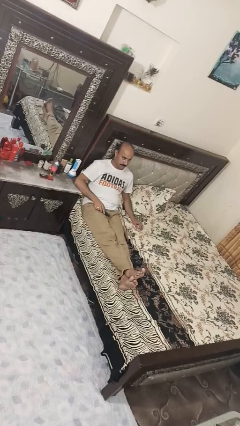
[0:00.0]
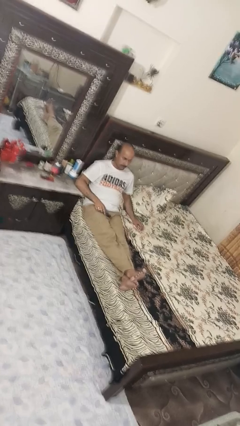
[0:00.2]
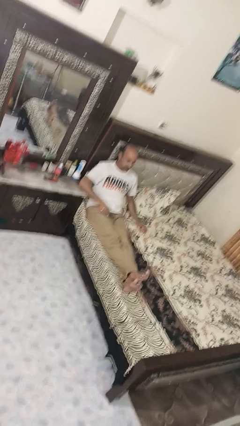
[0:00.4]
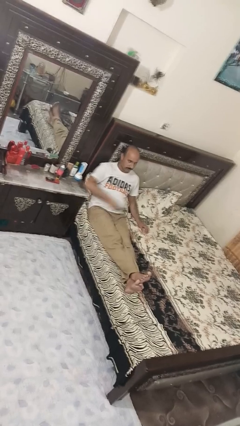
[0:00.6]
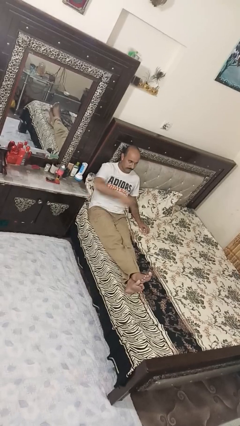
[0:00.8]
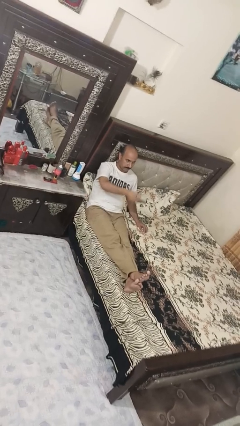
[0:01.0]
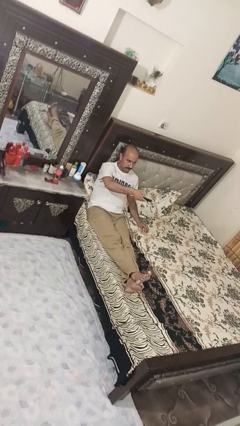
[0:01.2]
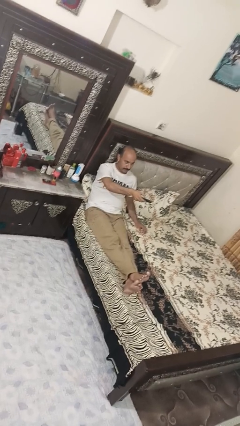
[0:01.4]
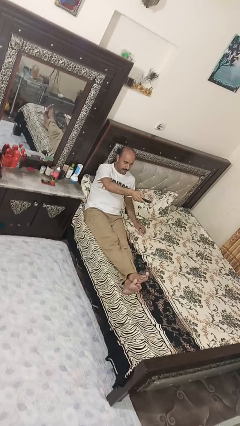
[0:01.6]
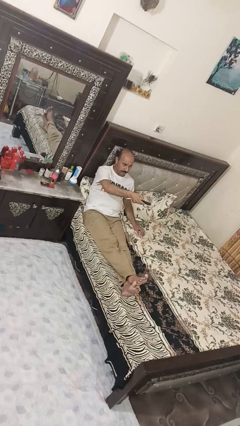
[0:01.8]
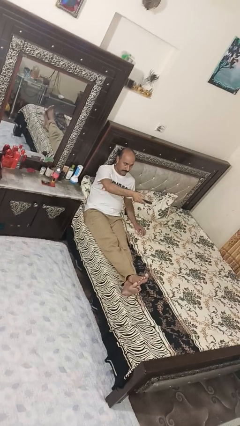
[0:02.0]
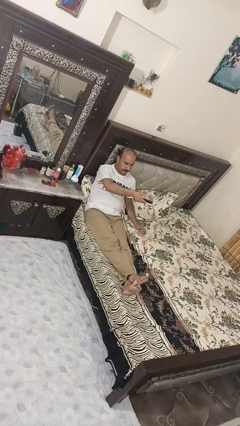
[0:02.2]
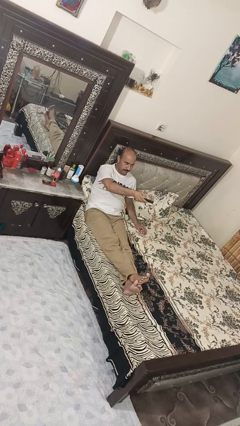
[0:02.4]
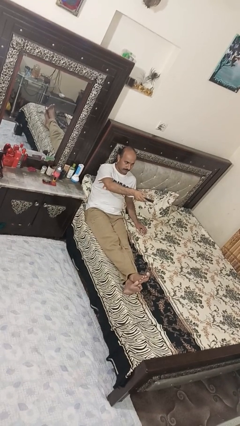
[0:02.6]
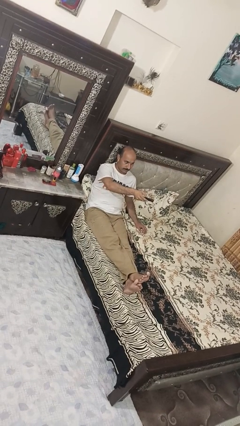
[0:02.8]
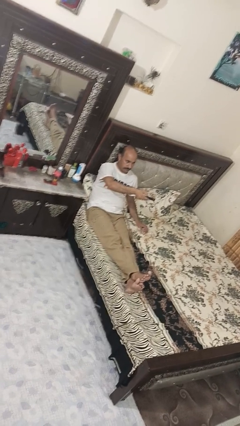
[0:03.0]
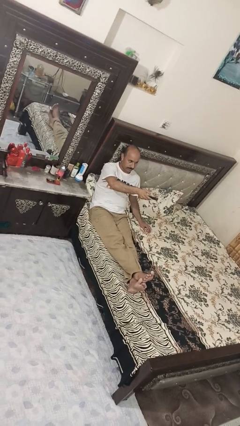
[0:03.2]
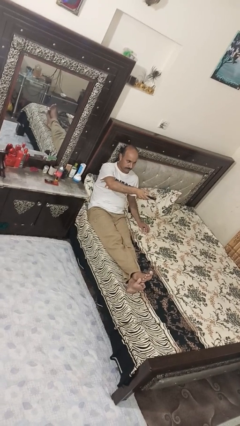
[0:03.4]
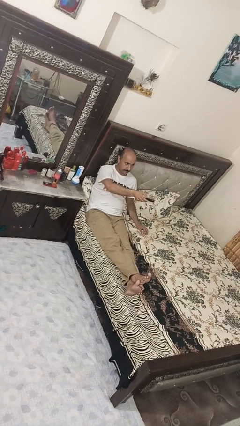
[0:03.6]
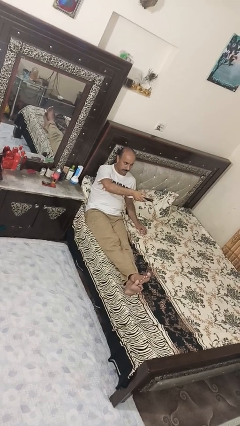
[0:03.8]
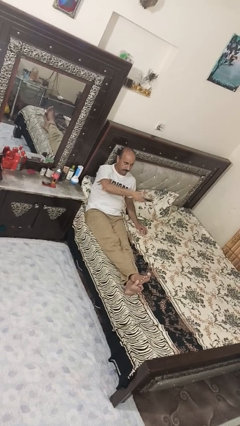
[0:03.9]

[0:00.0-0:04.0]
person uses television remote

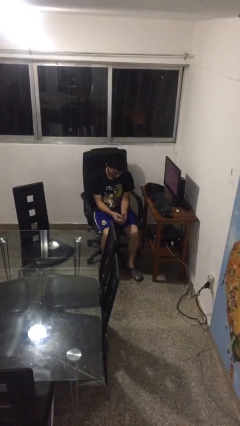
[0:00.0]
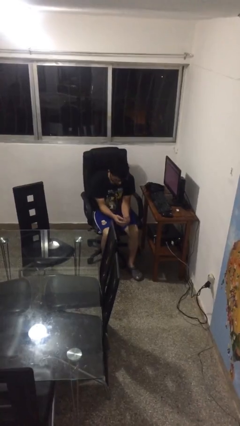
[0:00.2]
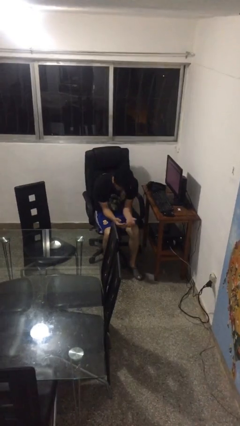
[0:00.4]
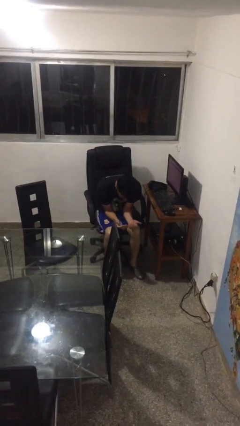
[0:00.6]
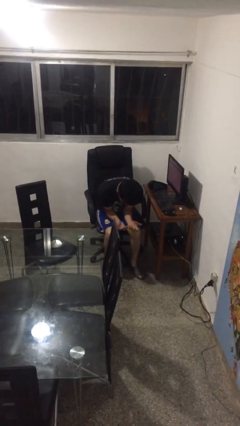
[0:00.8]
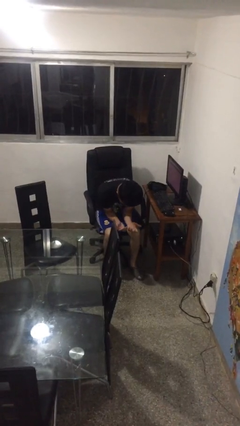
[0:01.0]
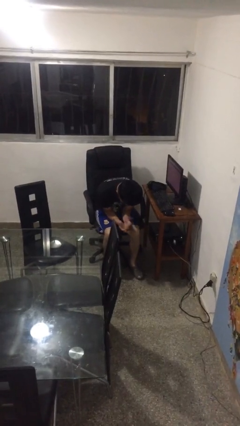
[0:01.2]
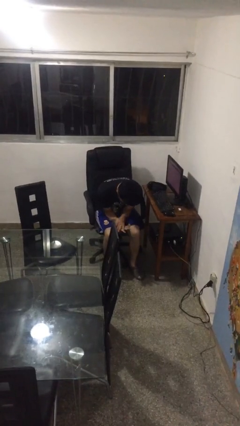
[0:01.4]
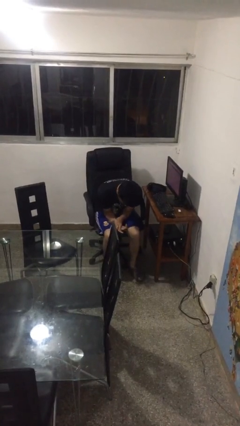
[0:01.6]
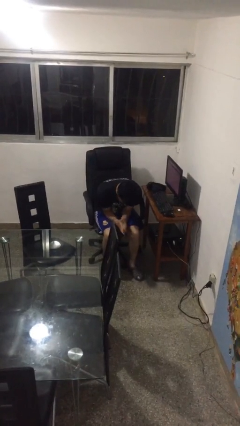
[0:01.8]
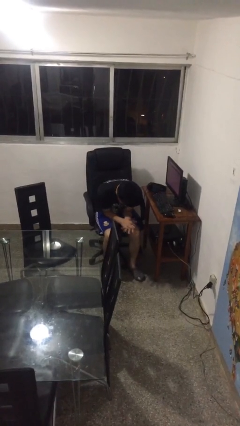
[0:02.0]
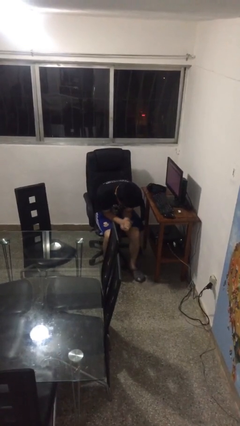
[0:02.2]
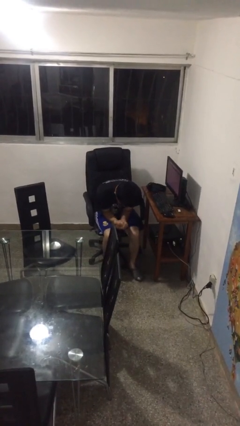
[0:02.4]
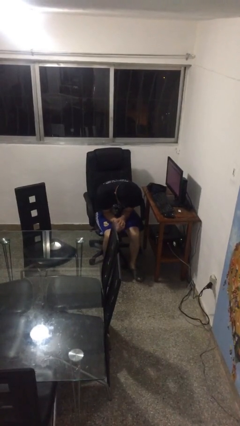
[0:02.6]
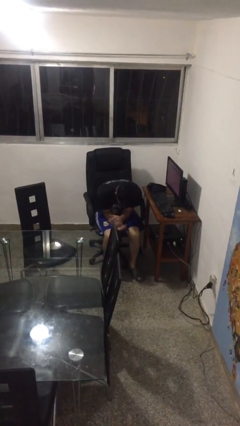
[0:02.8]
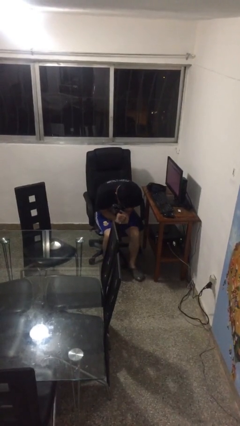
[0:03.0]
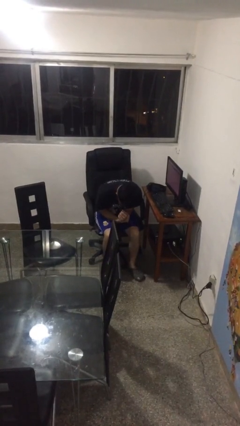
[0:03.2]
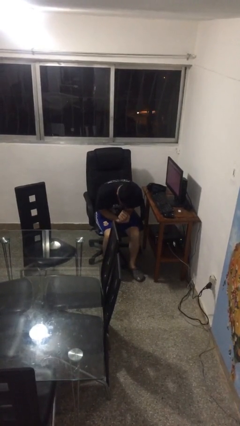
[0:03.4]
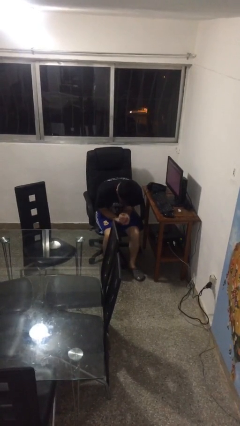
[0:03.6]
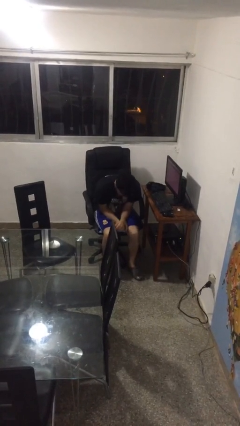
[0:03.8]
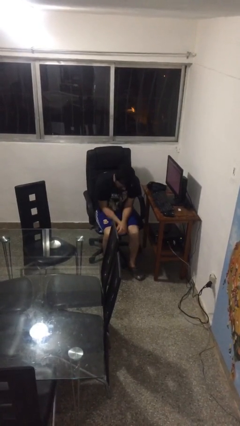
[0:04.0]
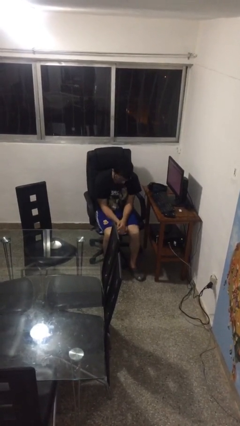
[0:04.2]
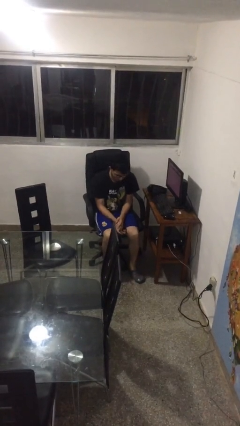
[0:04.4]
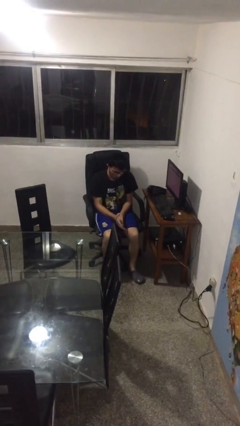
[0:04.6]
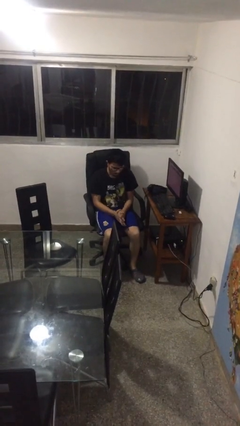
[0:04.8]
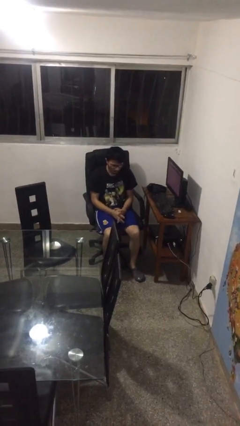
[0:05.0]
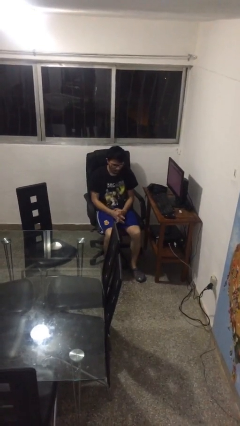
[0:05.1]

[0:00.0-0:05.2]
person looks at hands in lap

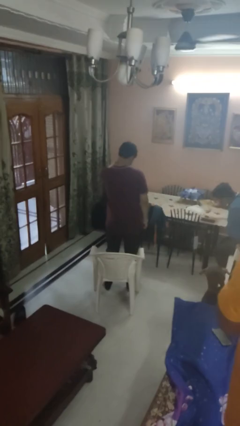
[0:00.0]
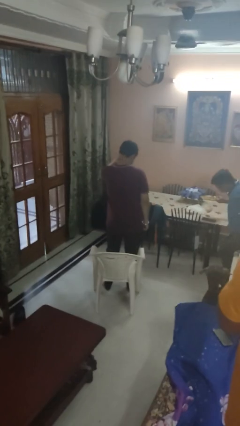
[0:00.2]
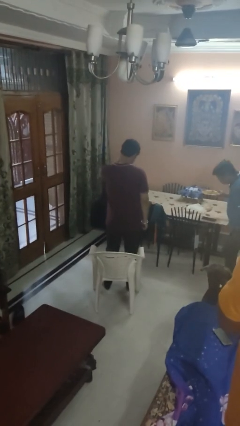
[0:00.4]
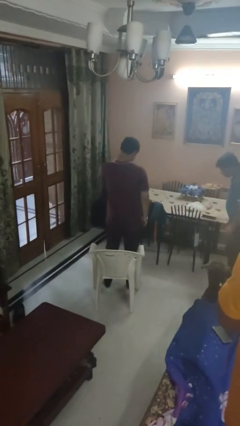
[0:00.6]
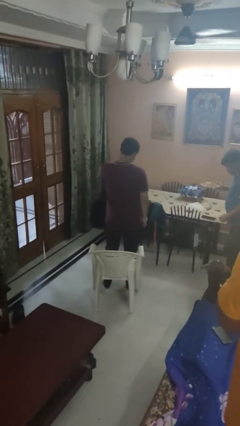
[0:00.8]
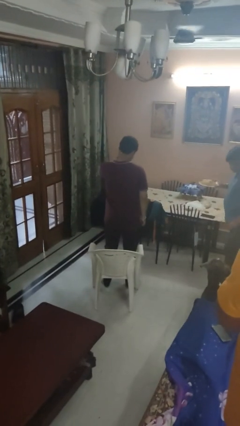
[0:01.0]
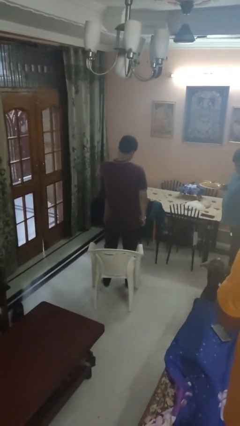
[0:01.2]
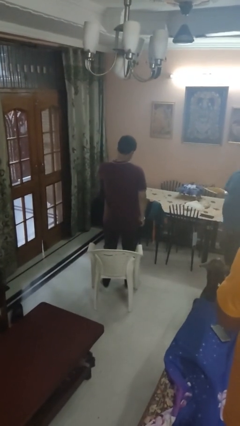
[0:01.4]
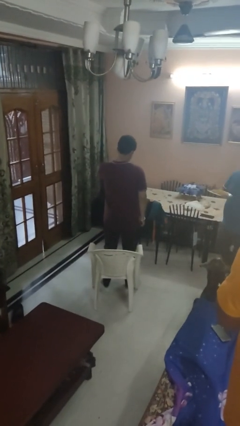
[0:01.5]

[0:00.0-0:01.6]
person rubs neck

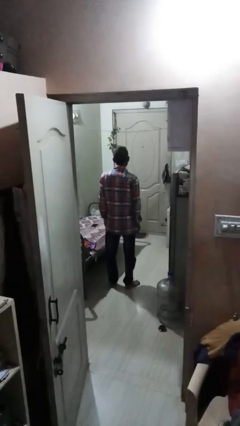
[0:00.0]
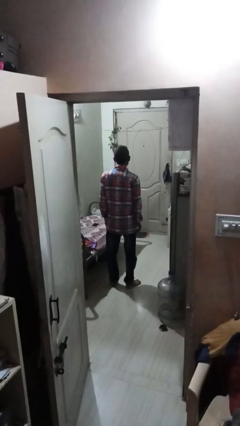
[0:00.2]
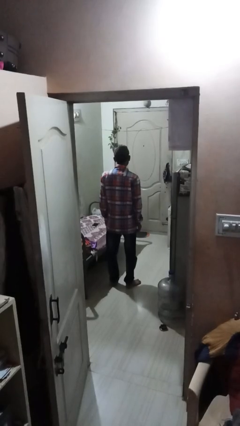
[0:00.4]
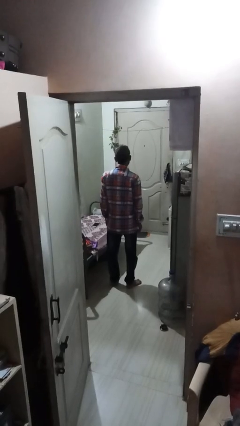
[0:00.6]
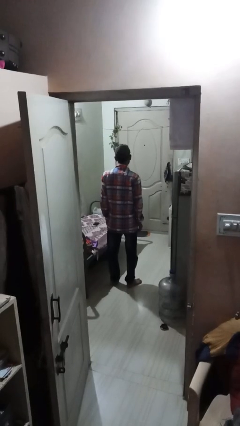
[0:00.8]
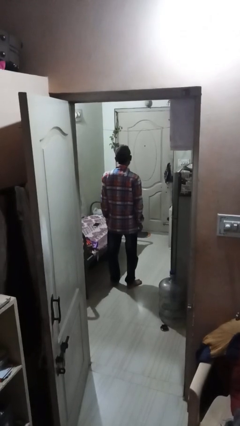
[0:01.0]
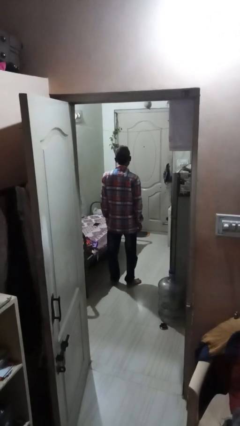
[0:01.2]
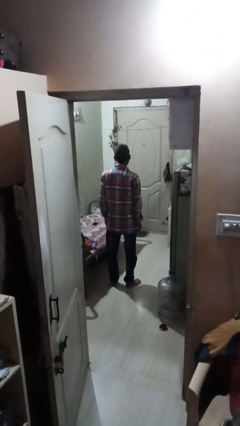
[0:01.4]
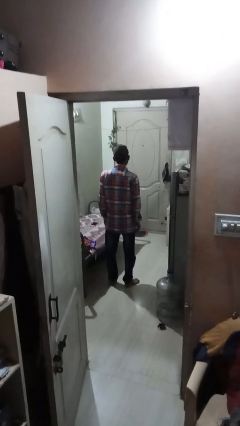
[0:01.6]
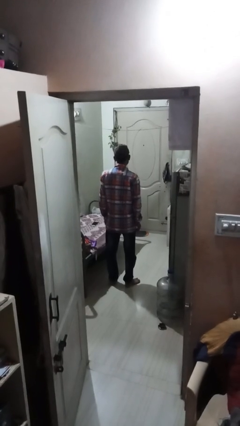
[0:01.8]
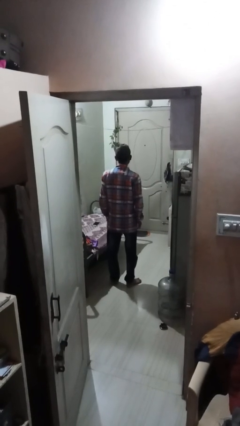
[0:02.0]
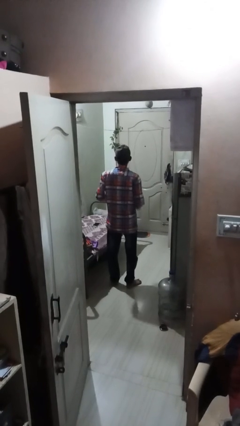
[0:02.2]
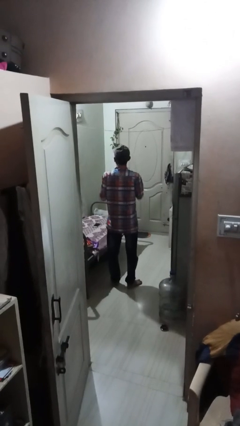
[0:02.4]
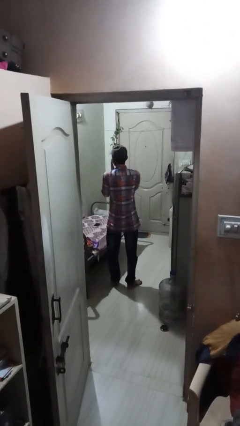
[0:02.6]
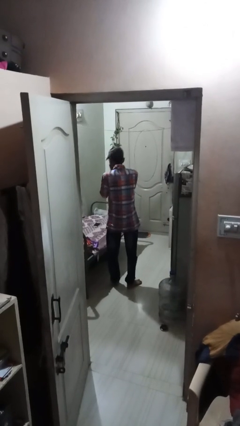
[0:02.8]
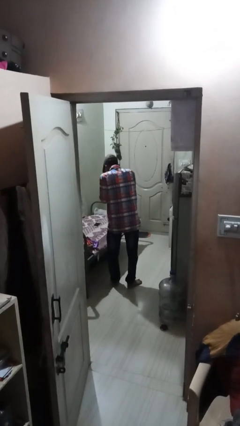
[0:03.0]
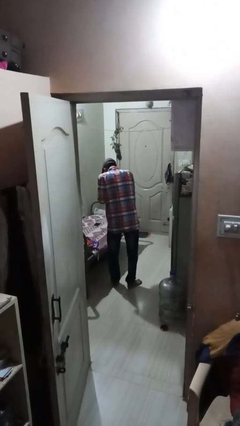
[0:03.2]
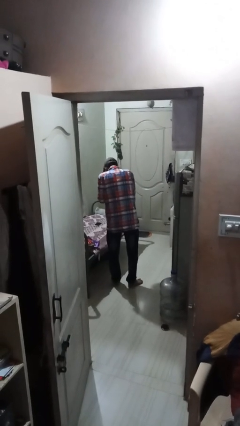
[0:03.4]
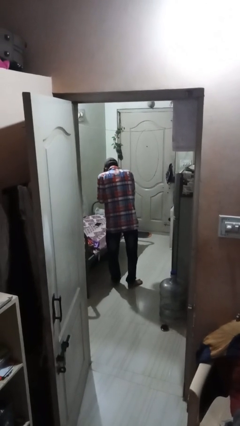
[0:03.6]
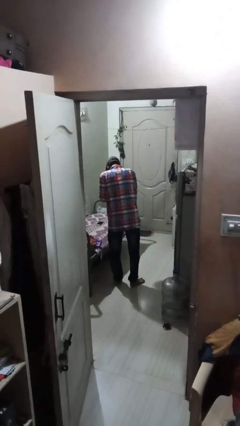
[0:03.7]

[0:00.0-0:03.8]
person sneezes into hand

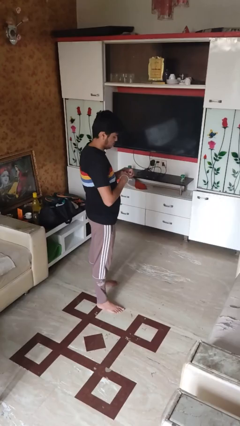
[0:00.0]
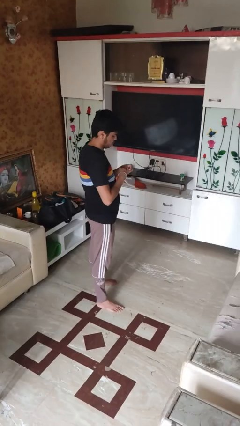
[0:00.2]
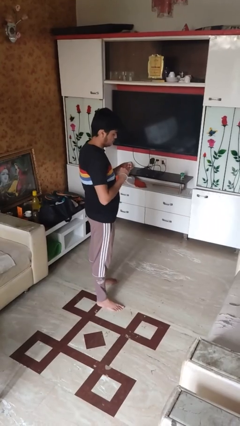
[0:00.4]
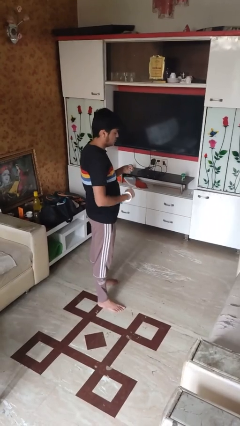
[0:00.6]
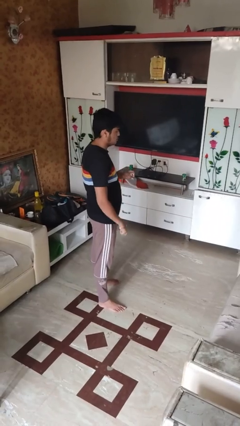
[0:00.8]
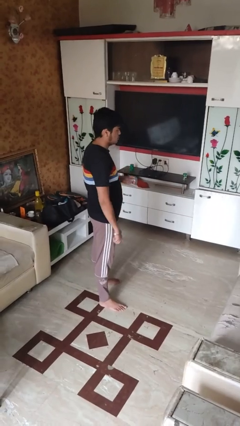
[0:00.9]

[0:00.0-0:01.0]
person takes off ring

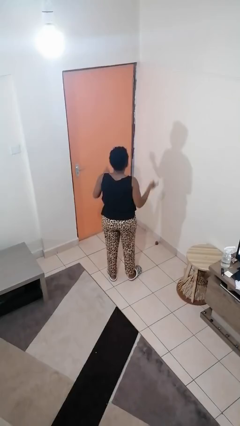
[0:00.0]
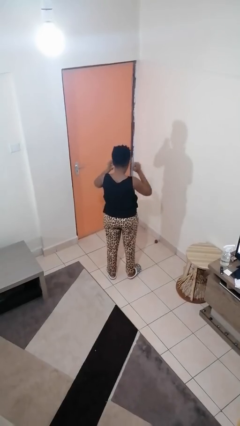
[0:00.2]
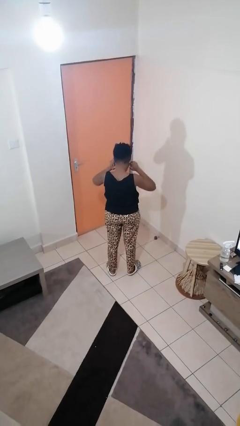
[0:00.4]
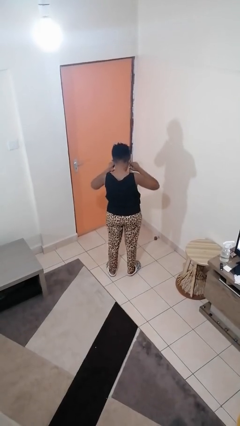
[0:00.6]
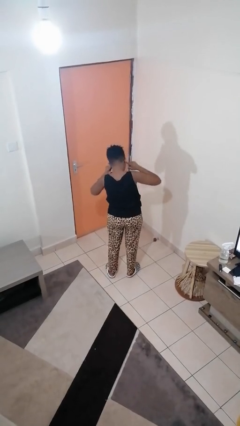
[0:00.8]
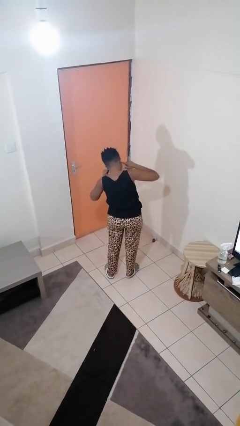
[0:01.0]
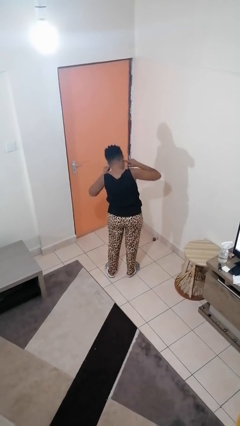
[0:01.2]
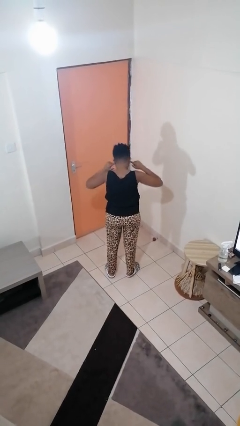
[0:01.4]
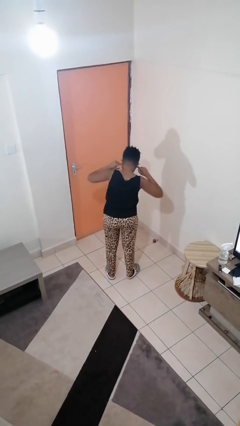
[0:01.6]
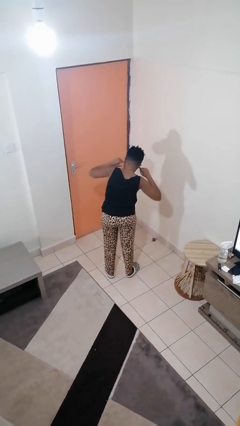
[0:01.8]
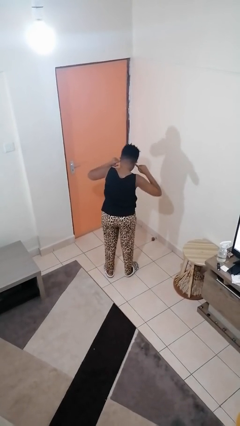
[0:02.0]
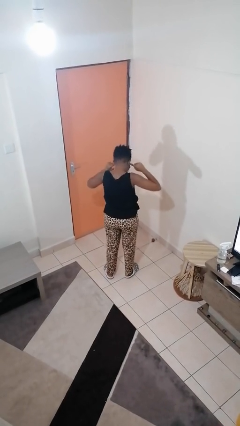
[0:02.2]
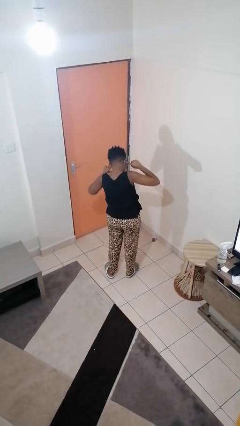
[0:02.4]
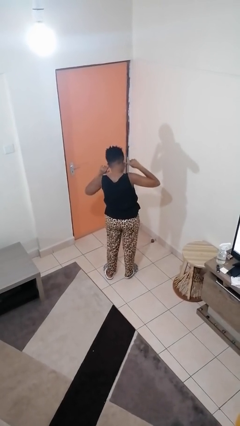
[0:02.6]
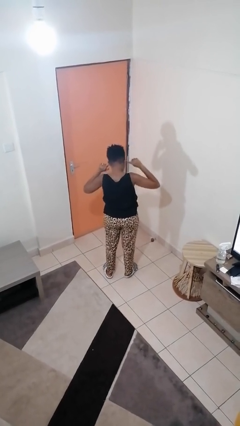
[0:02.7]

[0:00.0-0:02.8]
person puts fingers in ear
